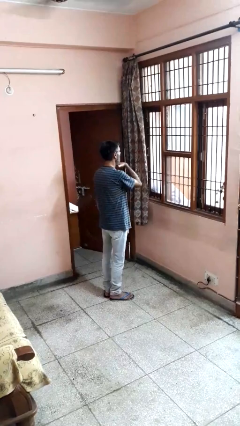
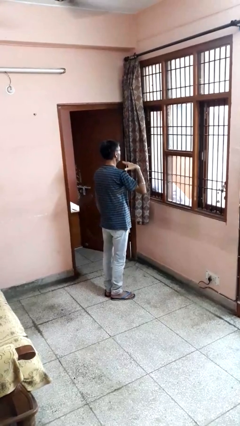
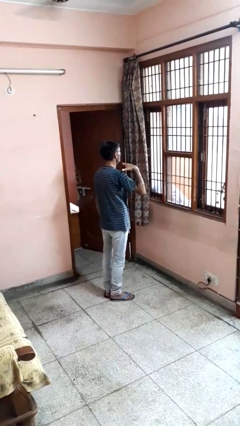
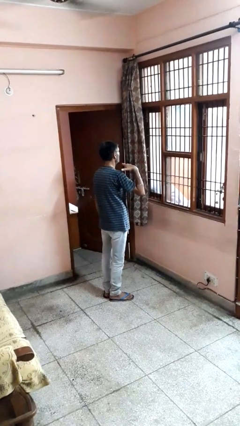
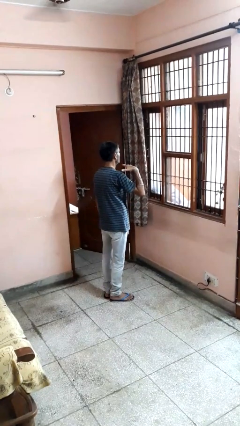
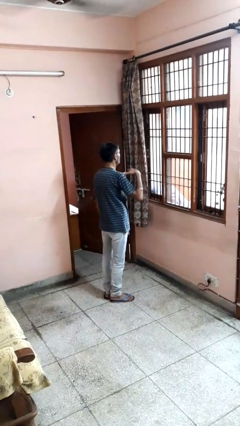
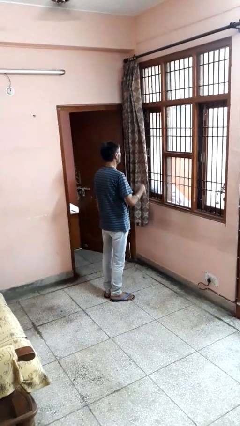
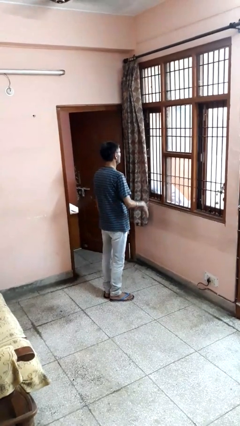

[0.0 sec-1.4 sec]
person gestures cut

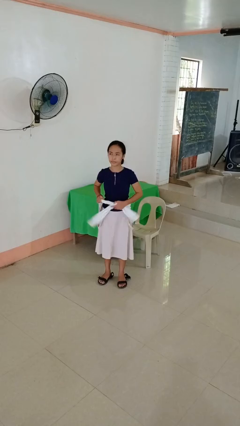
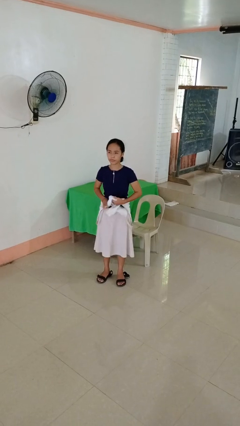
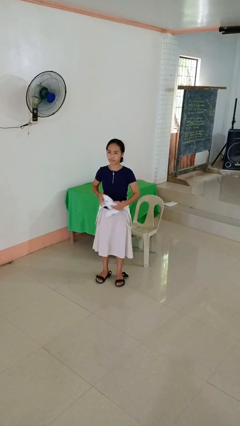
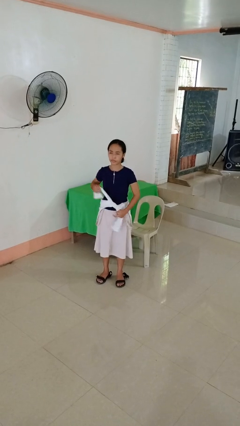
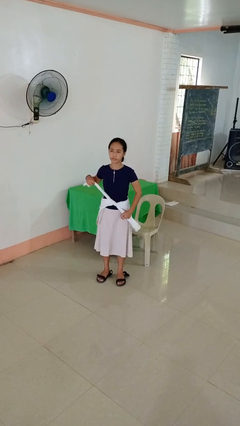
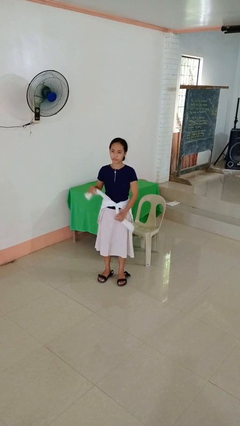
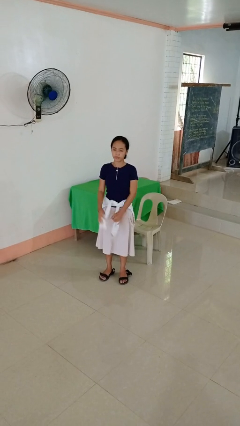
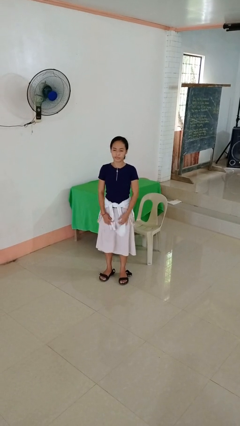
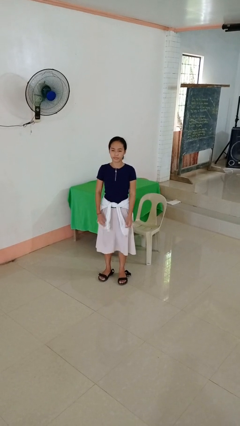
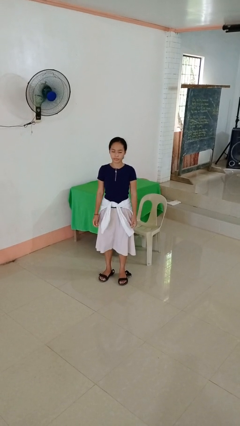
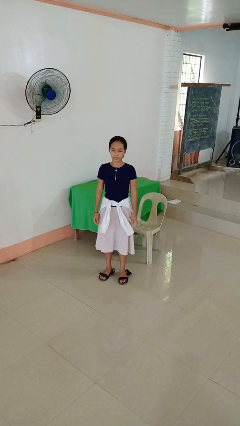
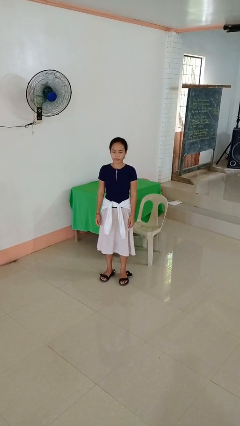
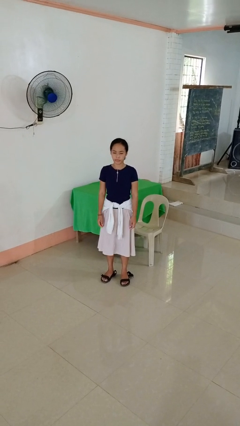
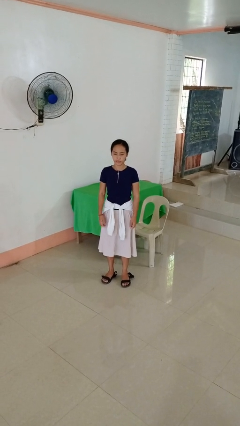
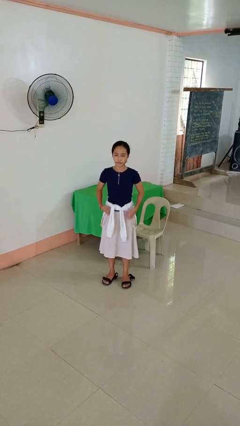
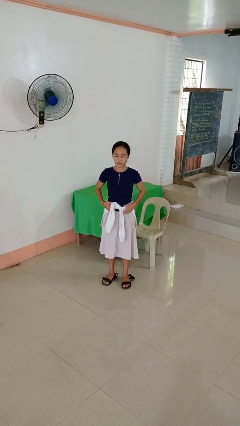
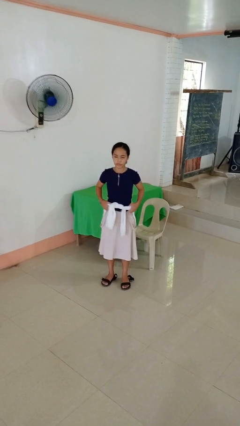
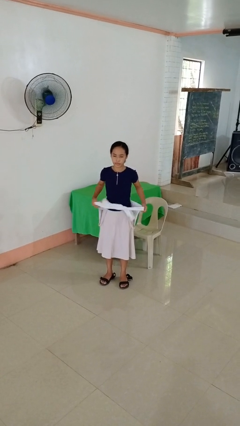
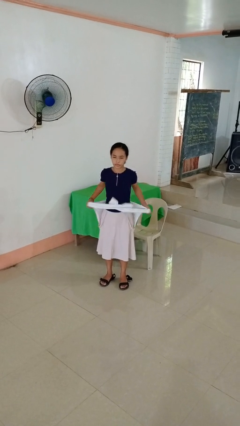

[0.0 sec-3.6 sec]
person ties jacket around waist

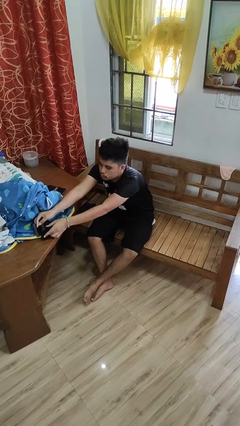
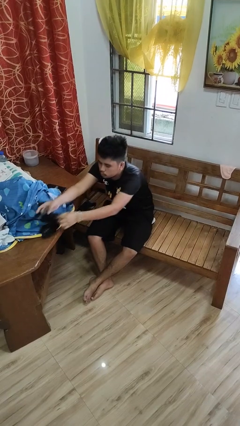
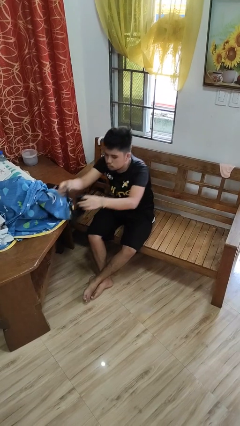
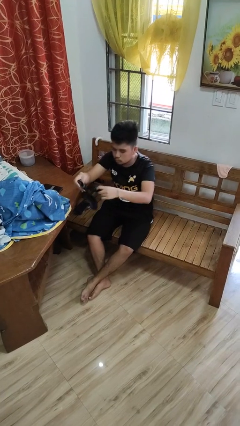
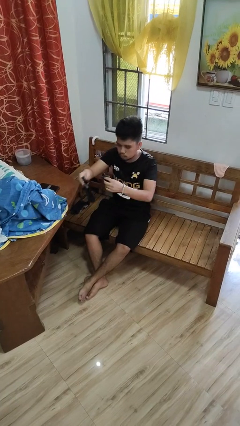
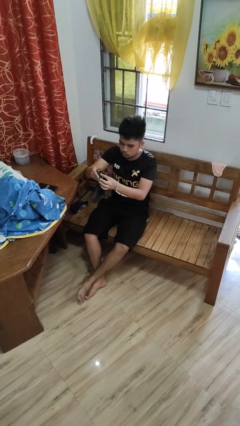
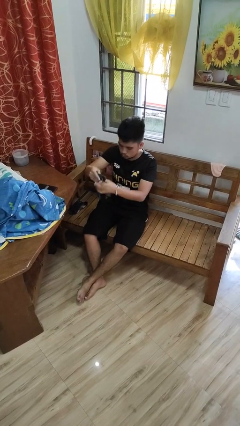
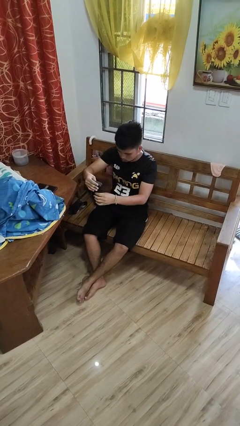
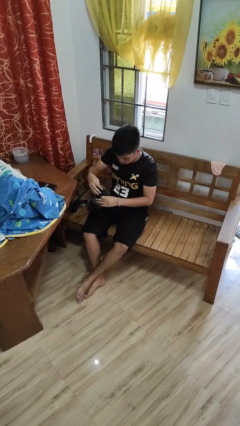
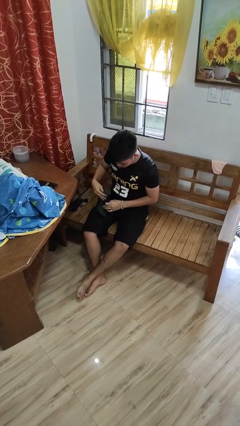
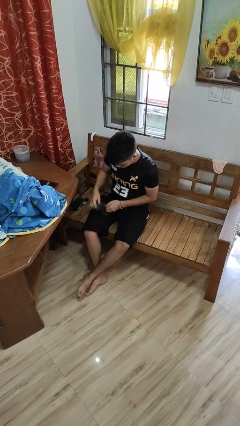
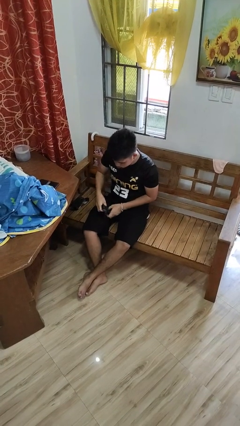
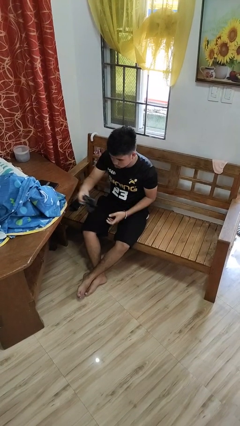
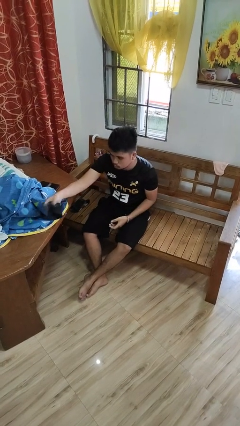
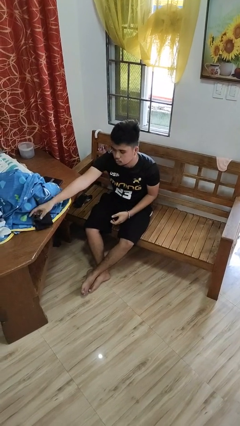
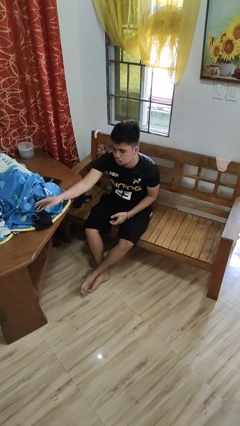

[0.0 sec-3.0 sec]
person folds socks

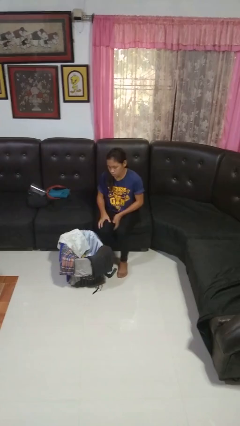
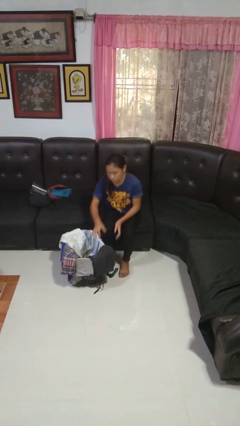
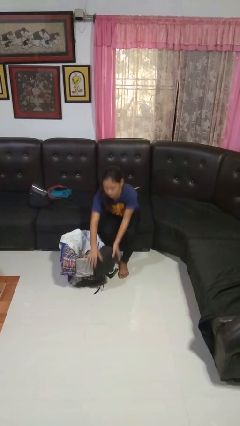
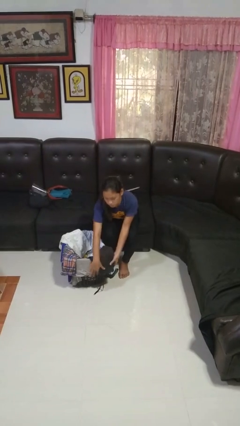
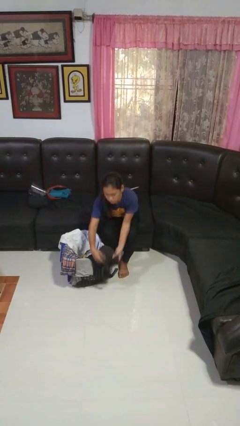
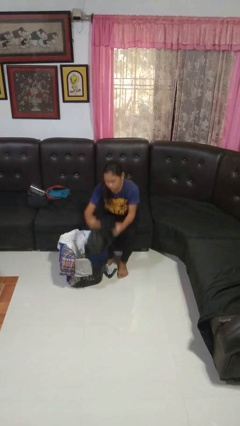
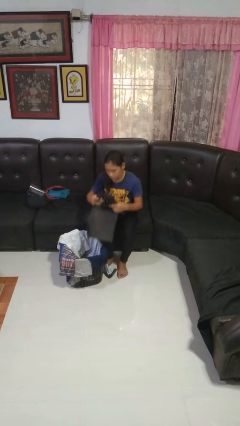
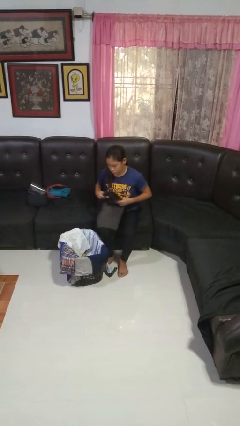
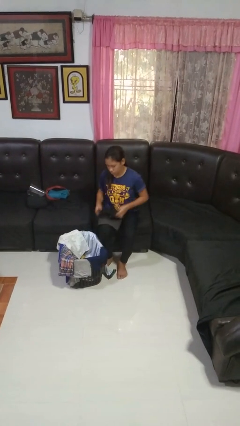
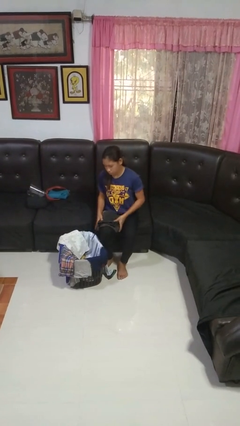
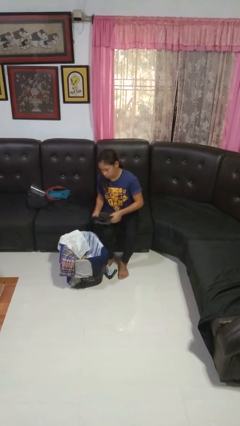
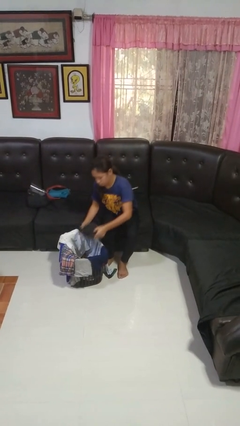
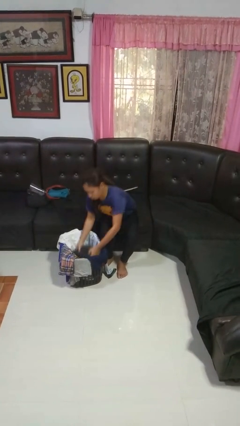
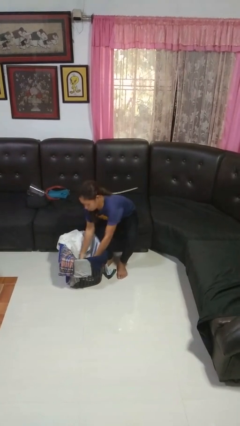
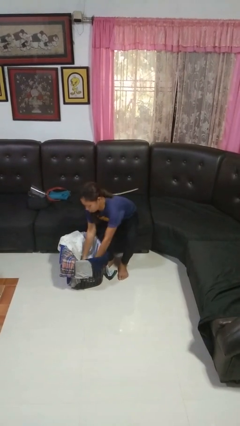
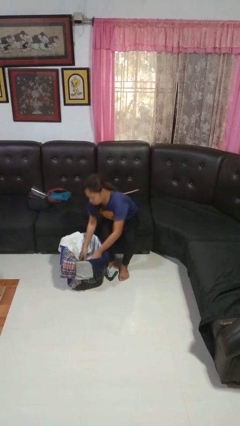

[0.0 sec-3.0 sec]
person folds pants

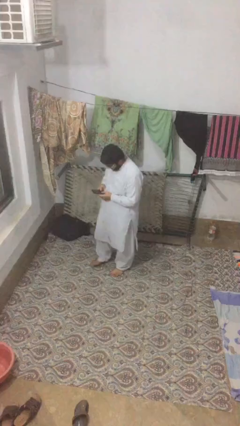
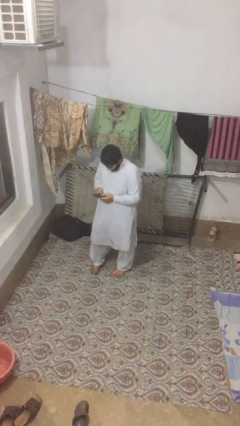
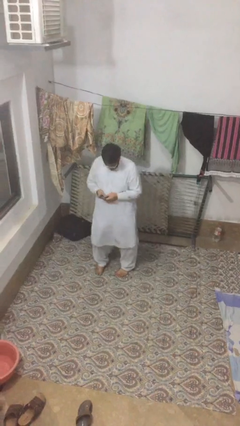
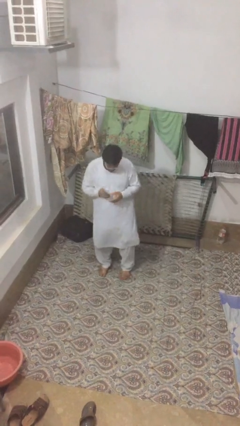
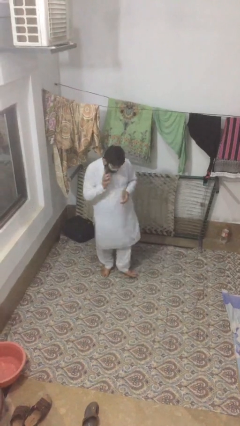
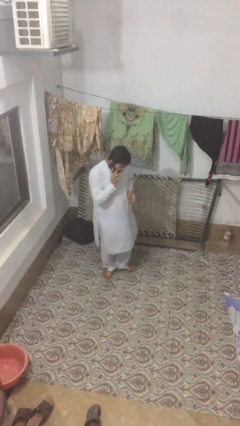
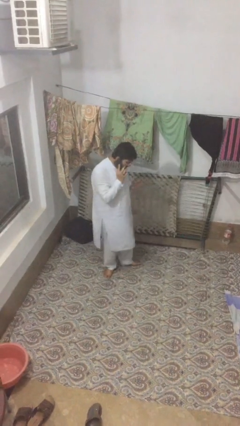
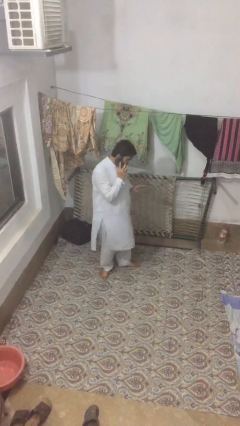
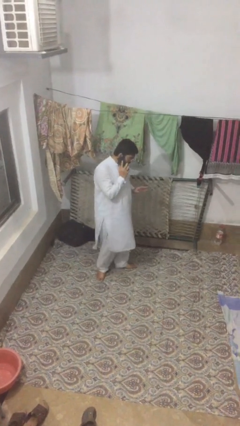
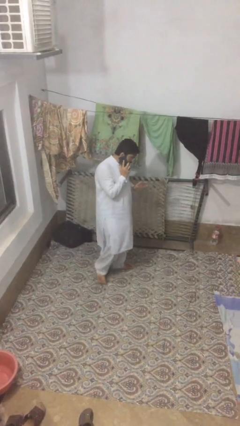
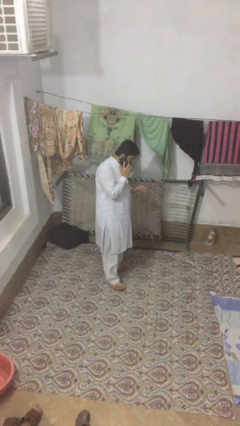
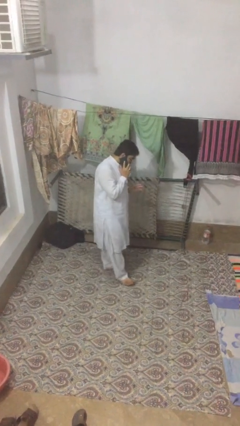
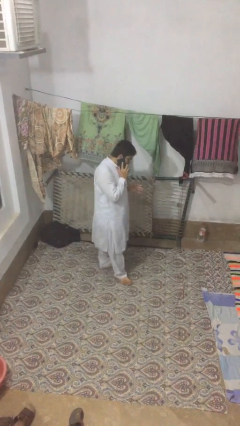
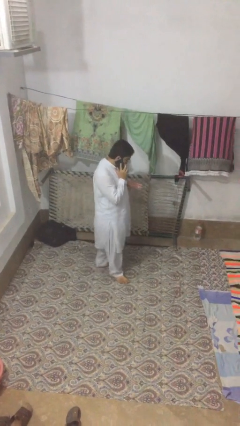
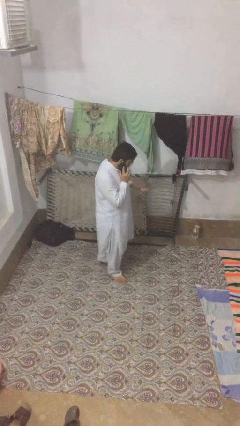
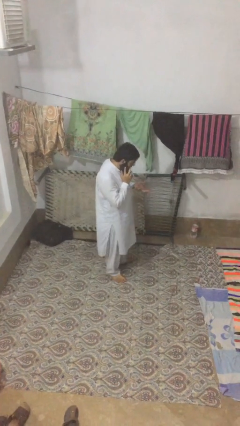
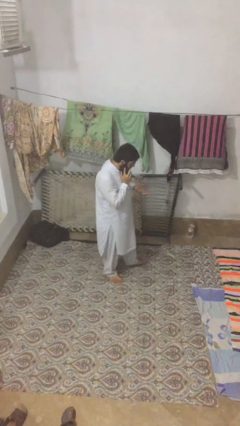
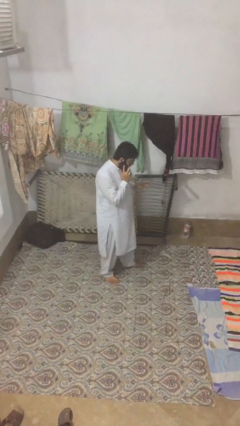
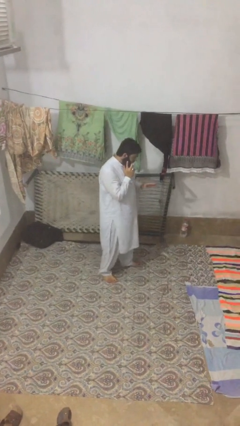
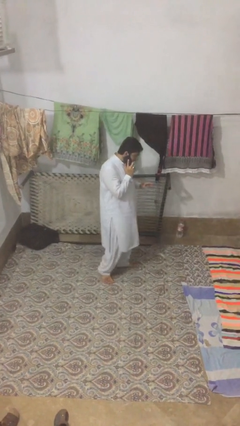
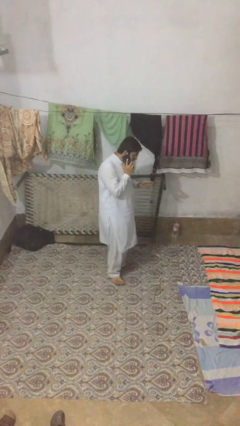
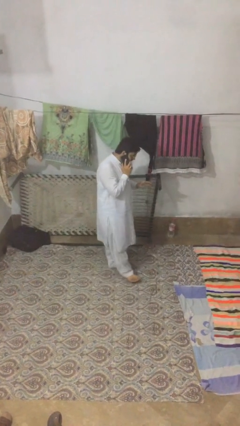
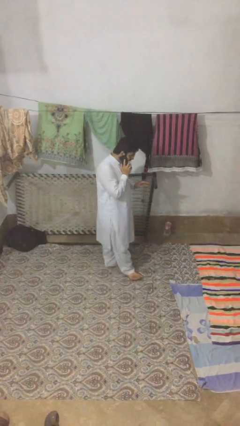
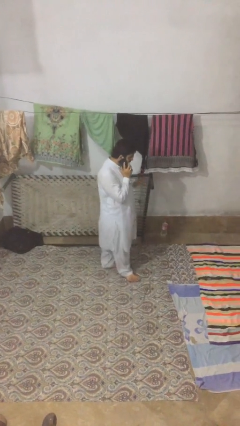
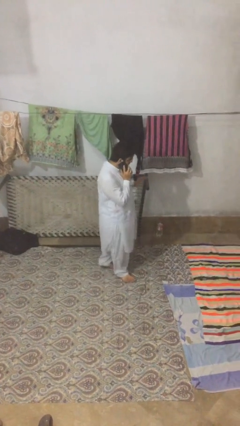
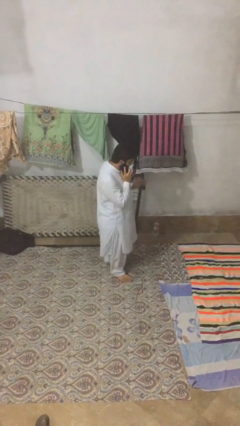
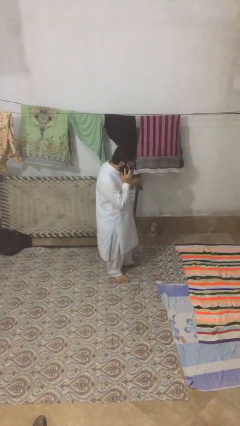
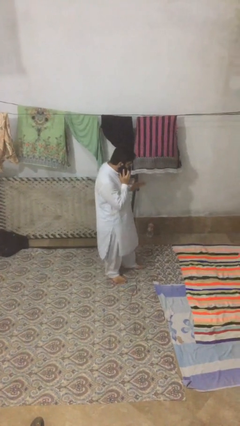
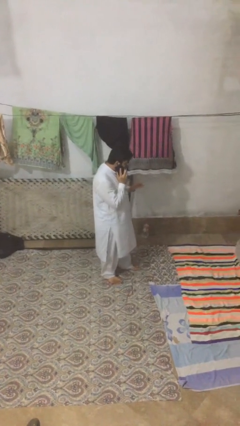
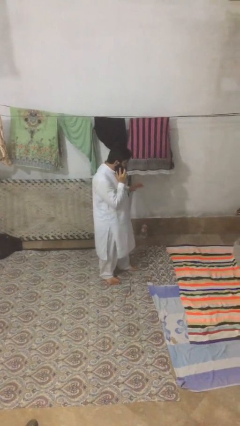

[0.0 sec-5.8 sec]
person talks on phone

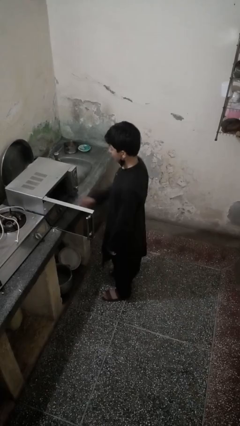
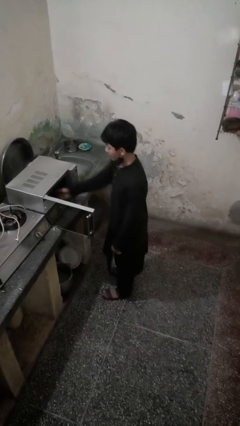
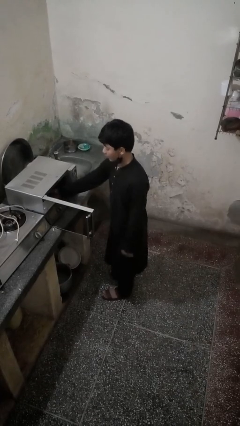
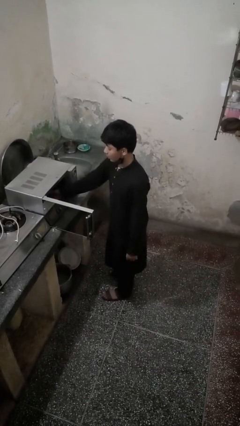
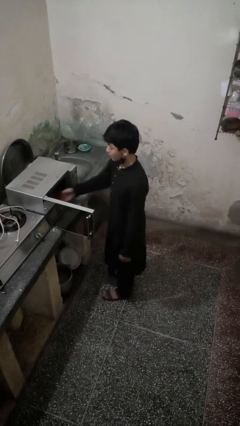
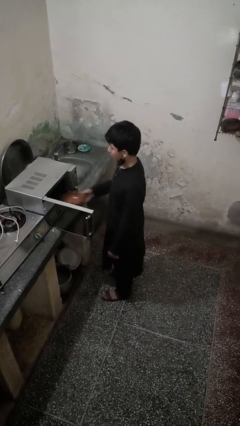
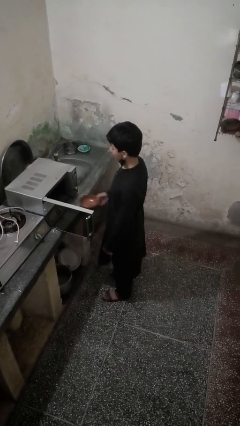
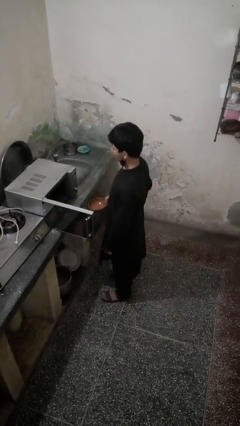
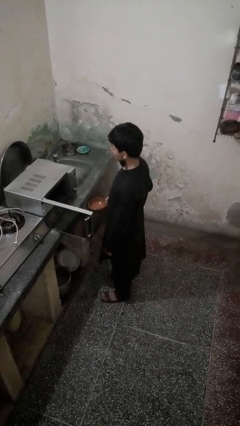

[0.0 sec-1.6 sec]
person takes object from microwave
